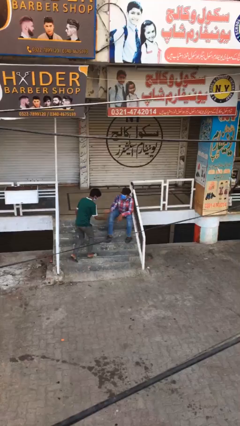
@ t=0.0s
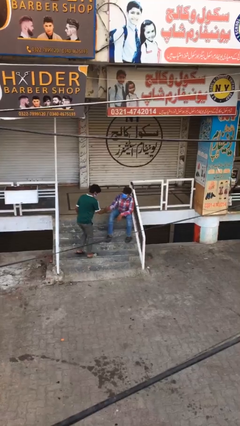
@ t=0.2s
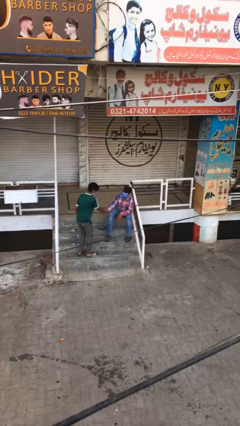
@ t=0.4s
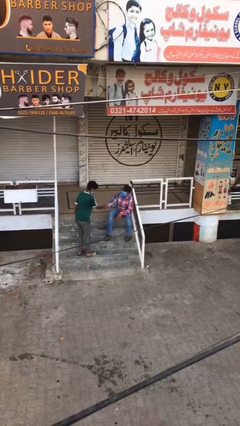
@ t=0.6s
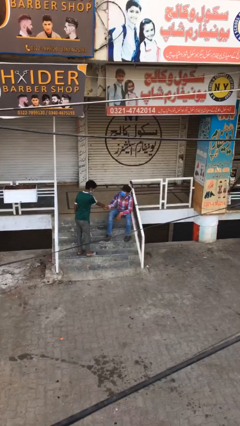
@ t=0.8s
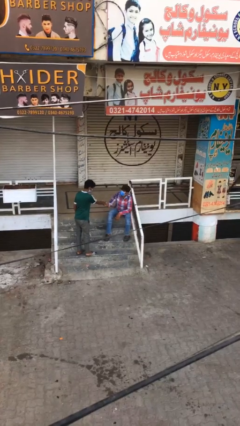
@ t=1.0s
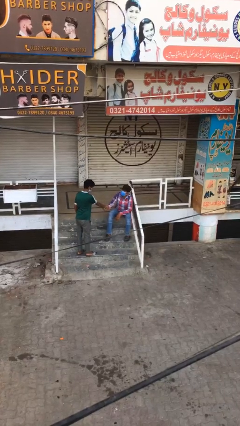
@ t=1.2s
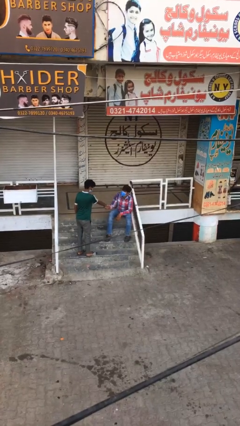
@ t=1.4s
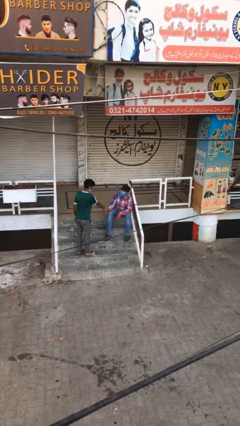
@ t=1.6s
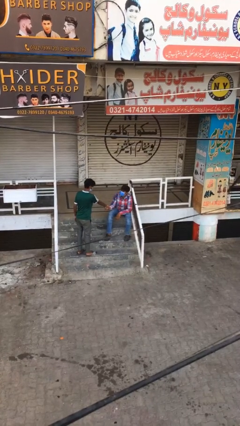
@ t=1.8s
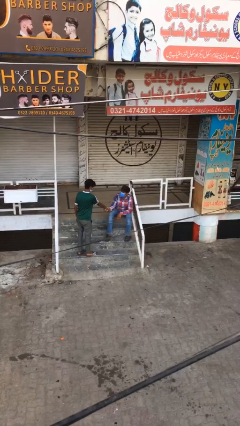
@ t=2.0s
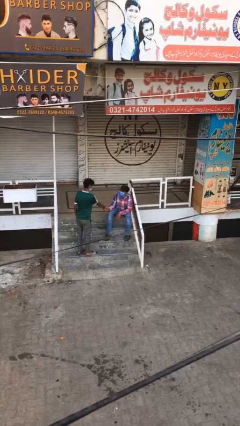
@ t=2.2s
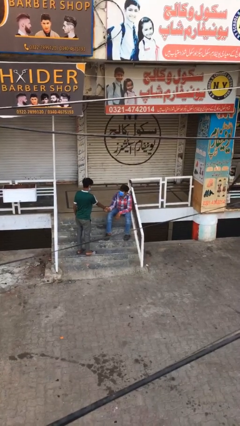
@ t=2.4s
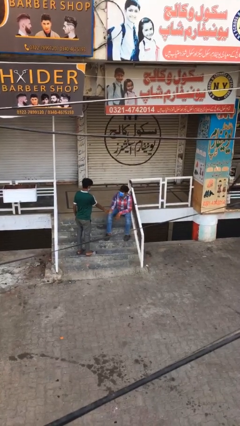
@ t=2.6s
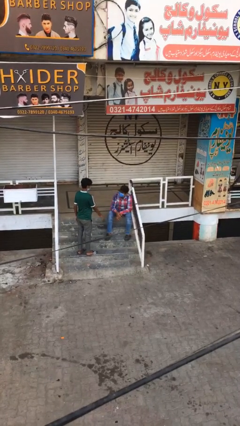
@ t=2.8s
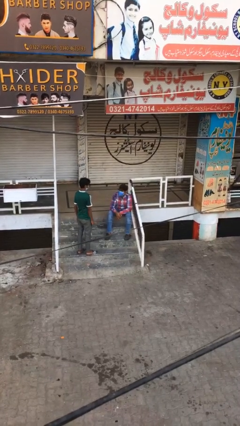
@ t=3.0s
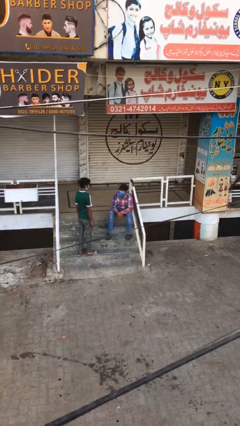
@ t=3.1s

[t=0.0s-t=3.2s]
person shakes hand

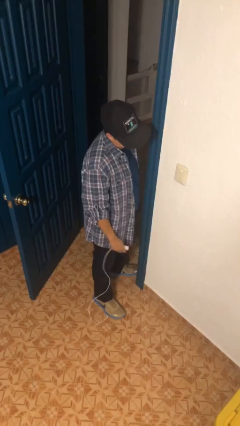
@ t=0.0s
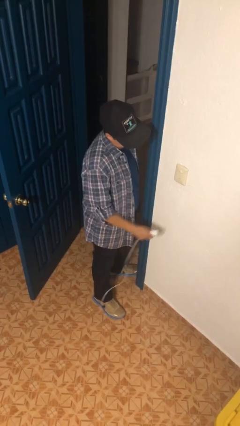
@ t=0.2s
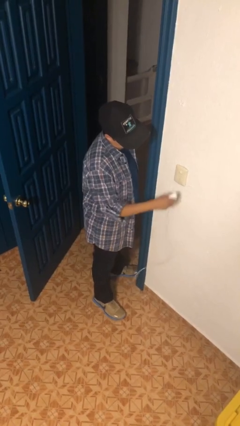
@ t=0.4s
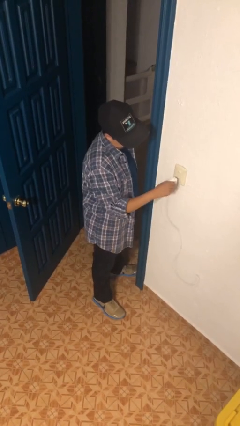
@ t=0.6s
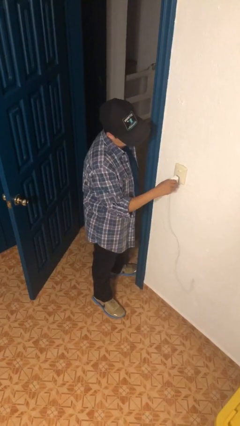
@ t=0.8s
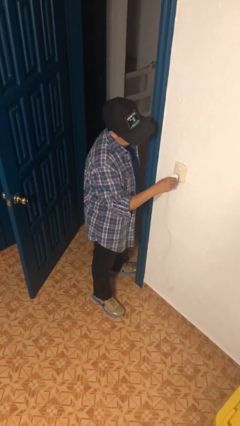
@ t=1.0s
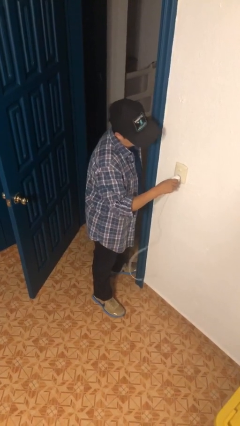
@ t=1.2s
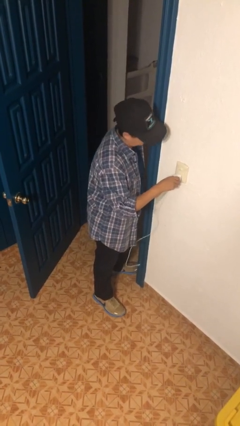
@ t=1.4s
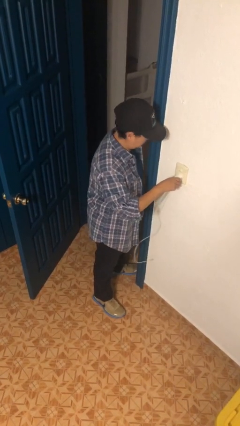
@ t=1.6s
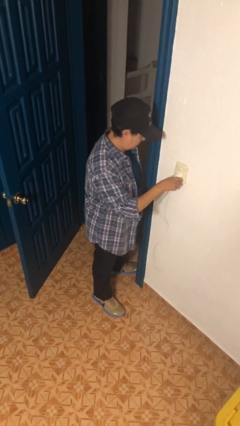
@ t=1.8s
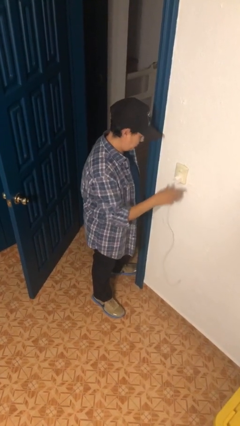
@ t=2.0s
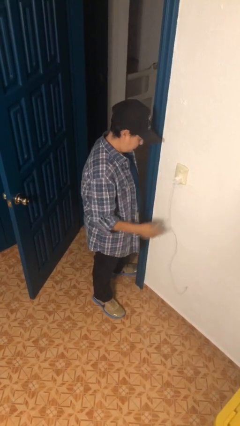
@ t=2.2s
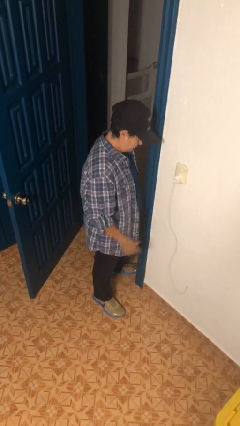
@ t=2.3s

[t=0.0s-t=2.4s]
person plugs into electrical socket

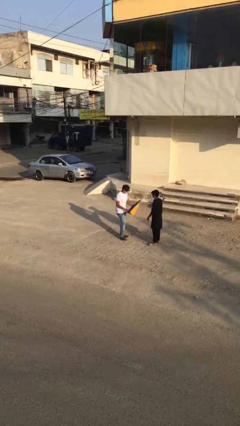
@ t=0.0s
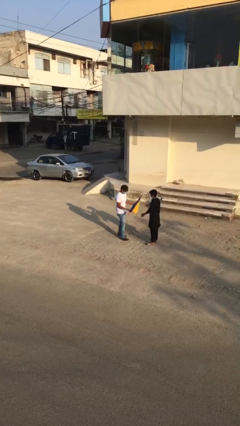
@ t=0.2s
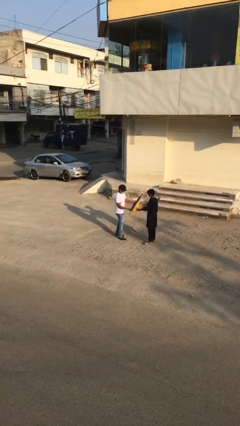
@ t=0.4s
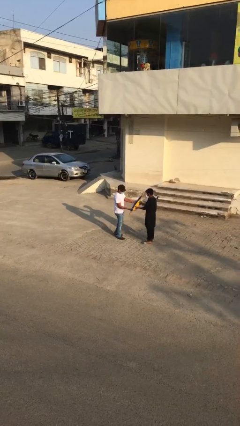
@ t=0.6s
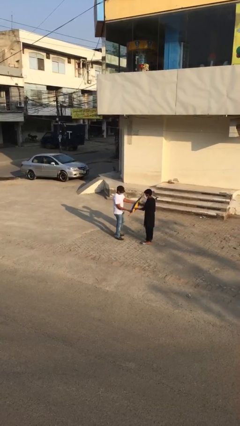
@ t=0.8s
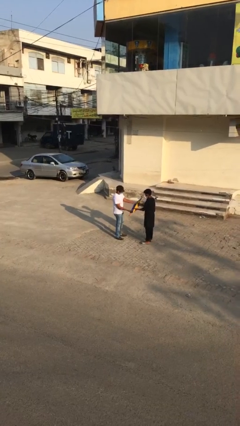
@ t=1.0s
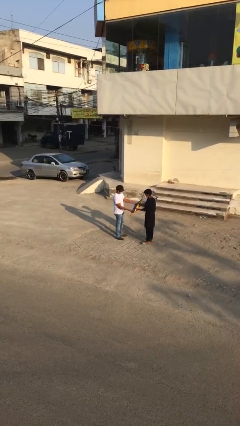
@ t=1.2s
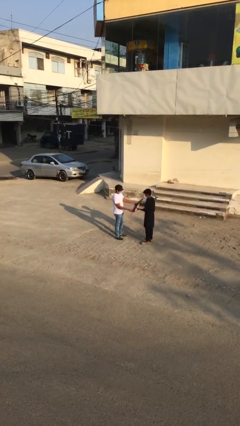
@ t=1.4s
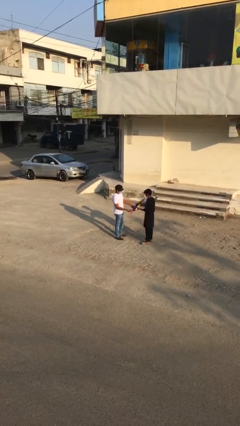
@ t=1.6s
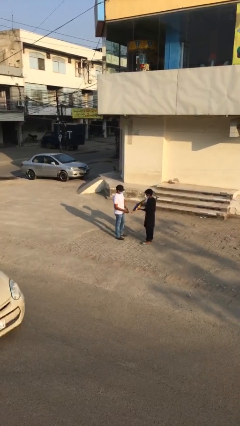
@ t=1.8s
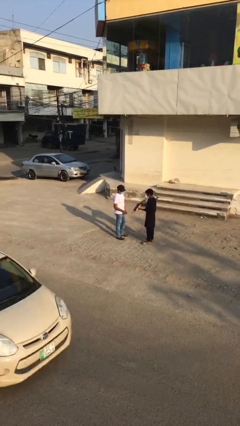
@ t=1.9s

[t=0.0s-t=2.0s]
person transfers object to person

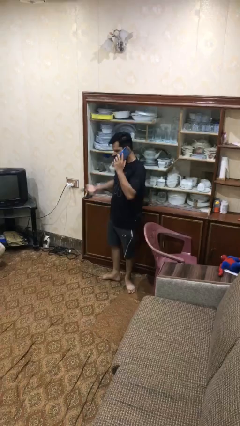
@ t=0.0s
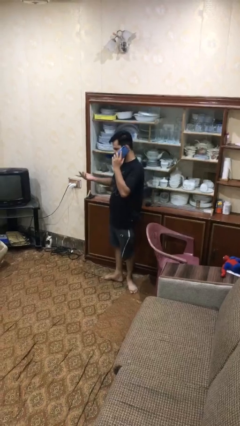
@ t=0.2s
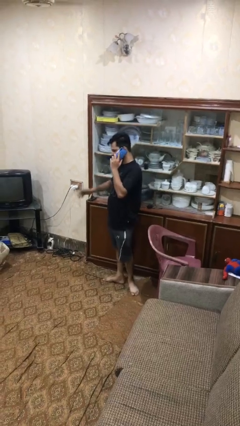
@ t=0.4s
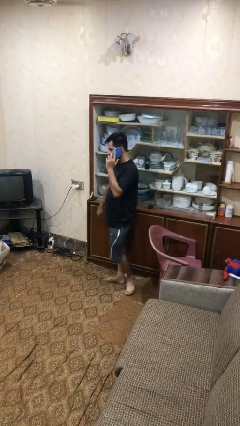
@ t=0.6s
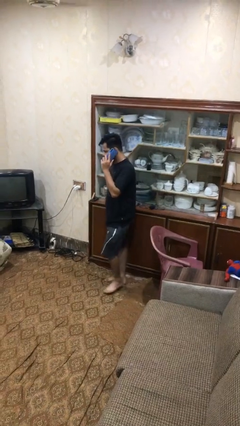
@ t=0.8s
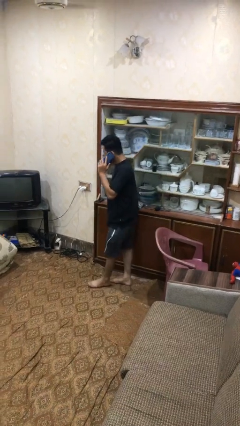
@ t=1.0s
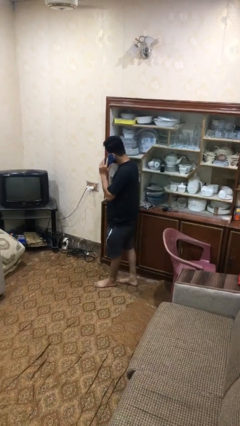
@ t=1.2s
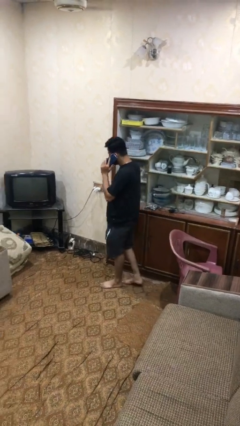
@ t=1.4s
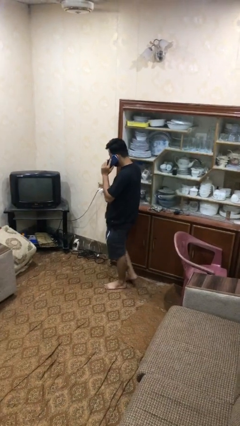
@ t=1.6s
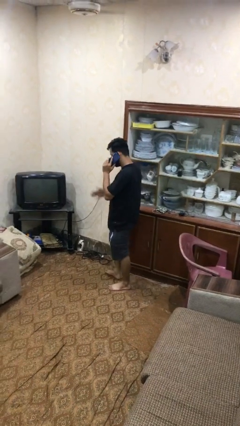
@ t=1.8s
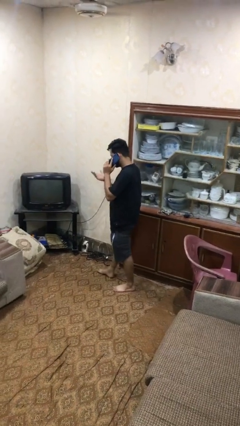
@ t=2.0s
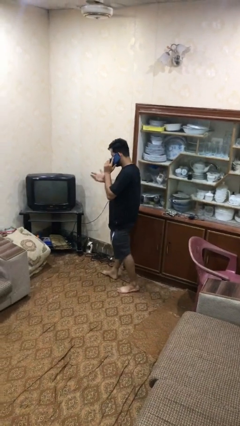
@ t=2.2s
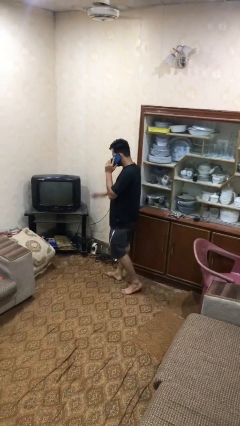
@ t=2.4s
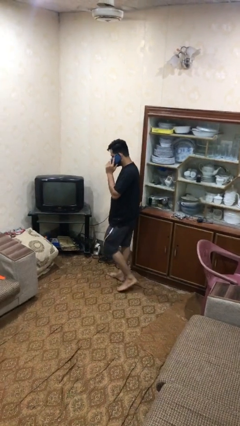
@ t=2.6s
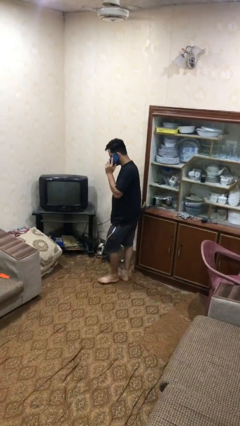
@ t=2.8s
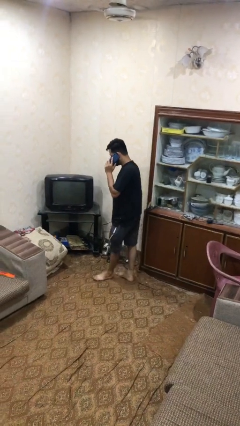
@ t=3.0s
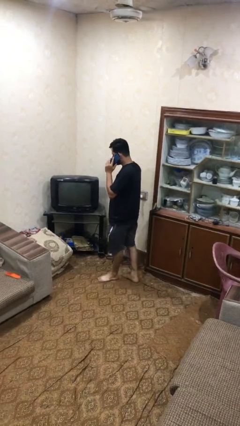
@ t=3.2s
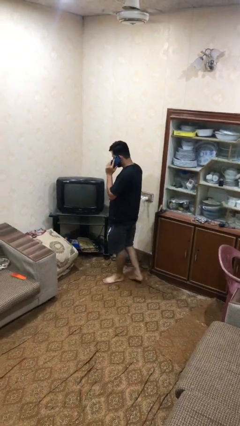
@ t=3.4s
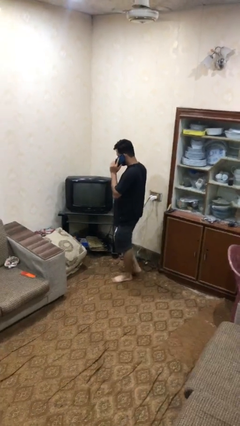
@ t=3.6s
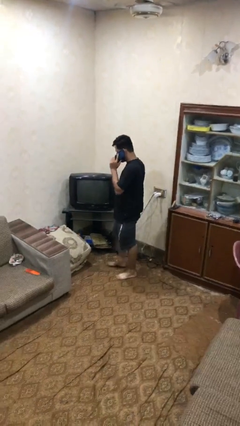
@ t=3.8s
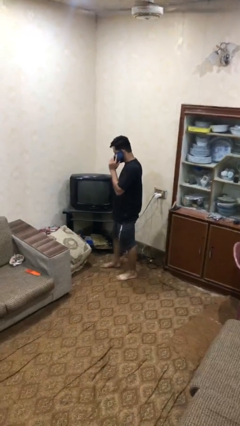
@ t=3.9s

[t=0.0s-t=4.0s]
person talks on phone

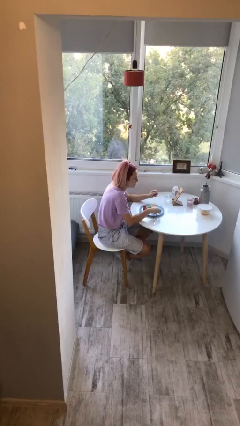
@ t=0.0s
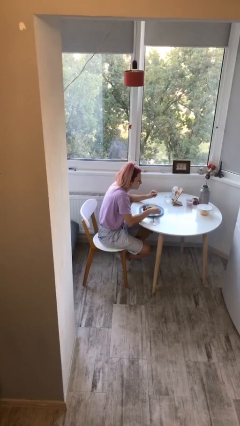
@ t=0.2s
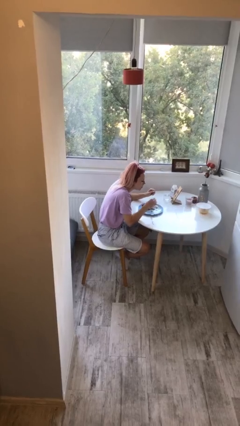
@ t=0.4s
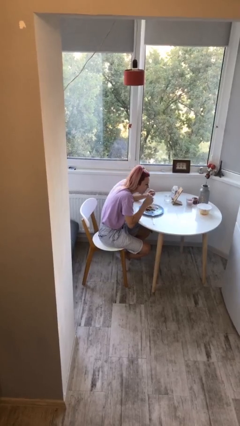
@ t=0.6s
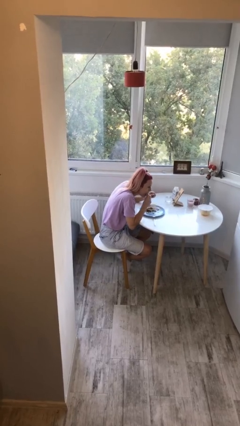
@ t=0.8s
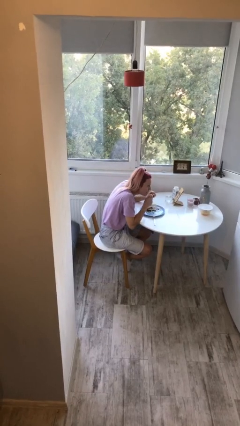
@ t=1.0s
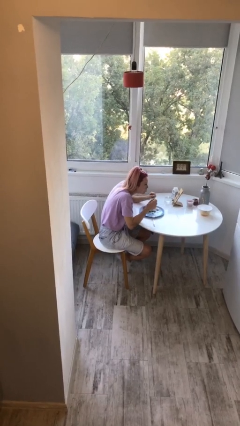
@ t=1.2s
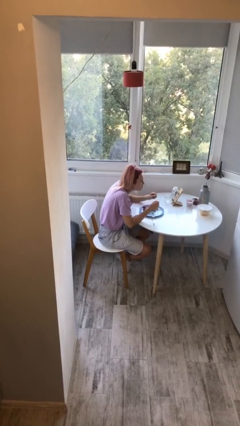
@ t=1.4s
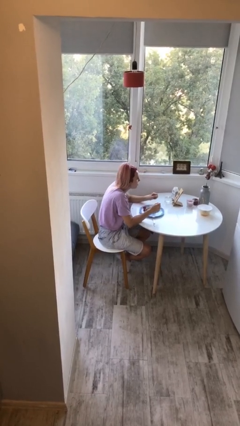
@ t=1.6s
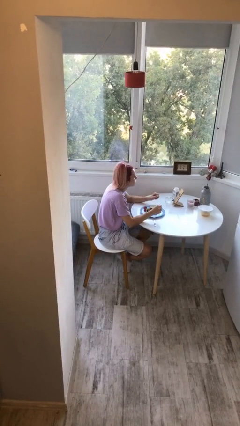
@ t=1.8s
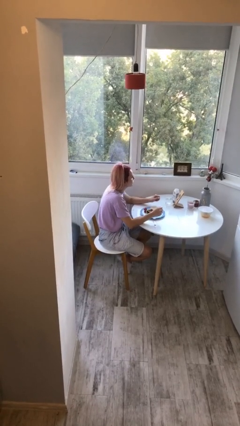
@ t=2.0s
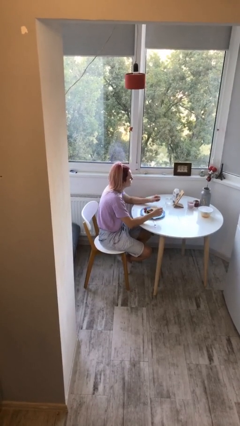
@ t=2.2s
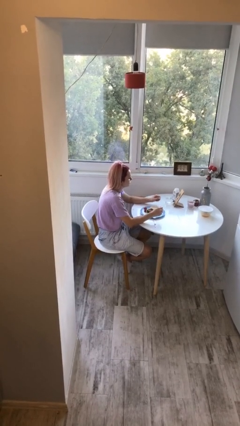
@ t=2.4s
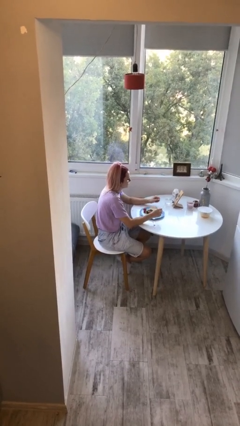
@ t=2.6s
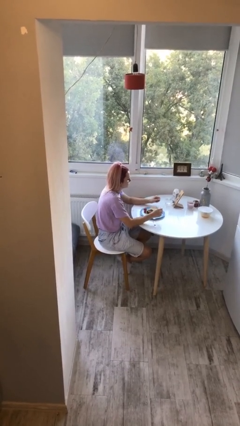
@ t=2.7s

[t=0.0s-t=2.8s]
person eats with hands

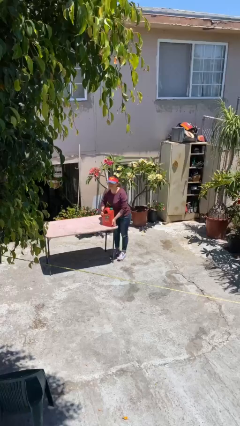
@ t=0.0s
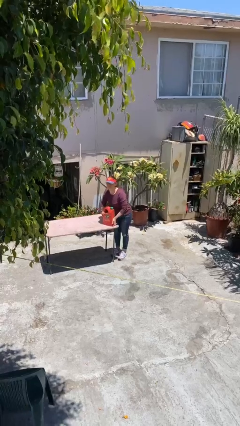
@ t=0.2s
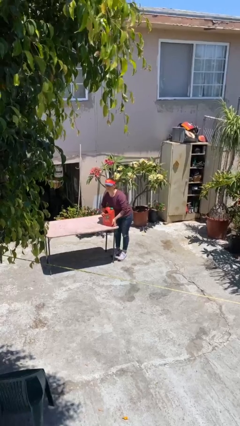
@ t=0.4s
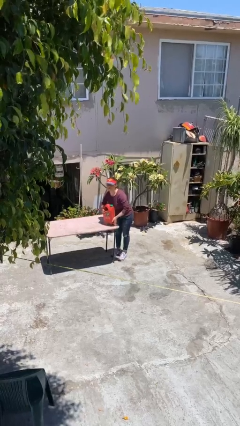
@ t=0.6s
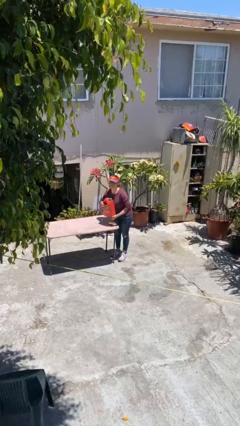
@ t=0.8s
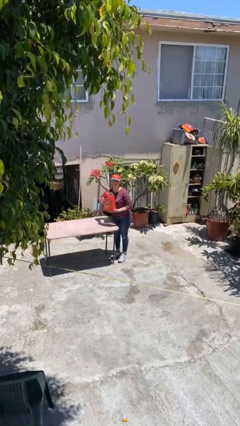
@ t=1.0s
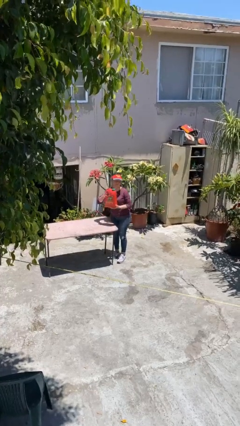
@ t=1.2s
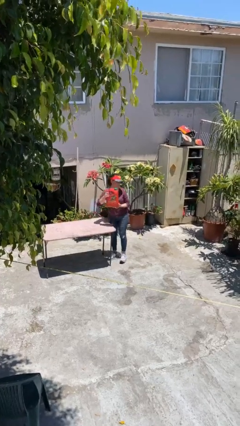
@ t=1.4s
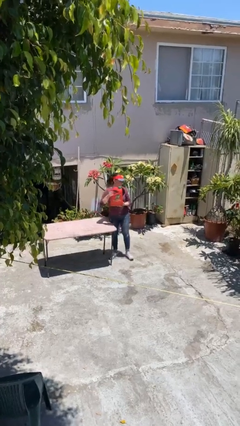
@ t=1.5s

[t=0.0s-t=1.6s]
person picks up object from table

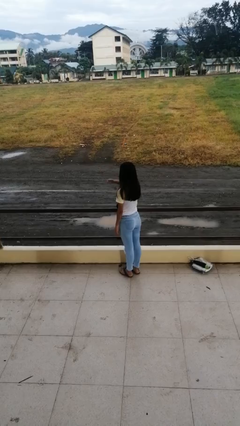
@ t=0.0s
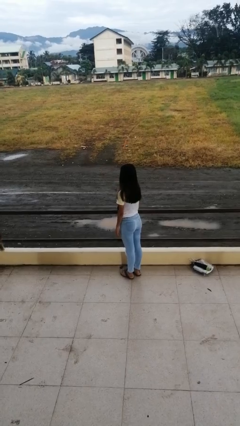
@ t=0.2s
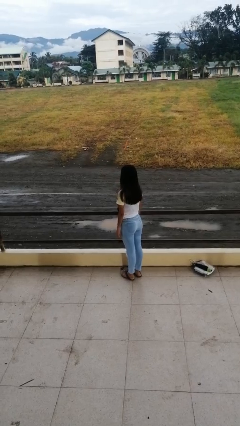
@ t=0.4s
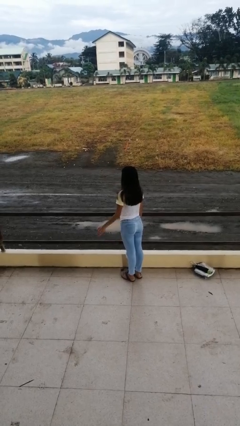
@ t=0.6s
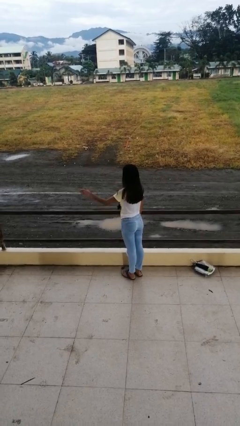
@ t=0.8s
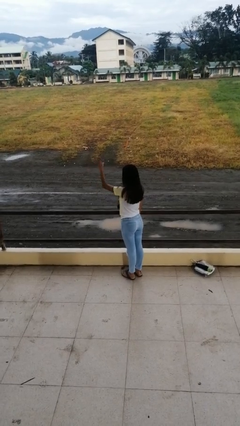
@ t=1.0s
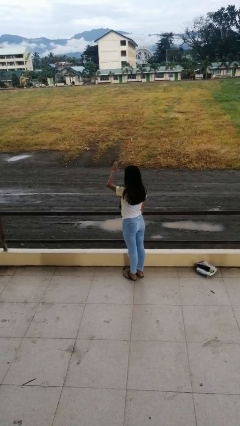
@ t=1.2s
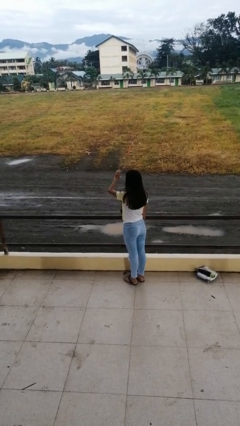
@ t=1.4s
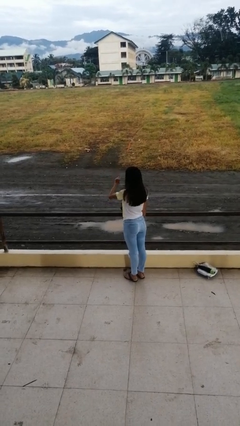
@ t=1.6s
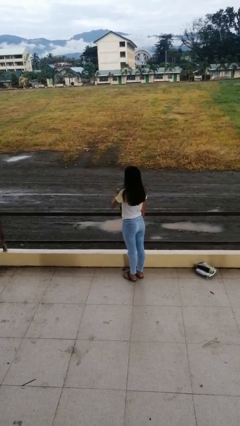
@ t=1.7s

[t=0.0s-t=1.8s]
person gestures swipe right
